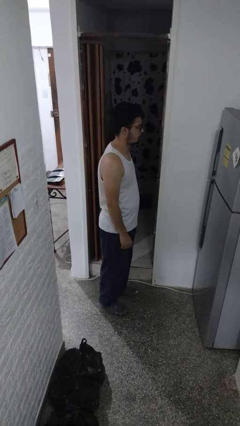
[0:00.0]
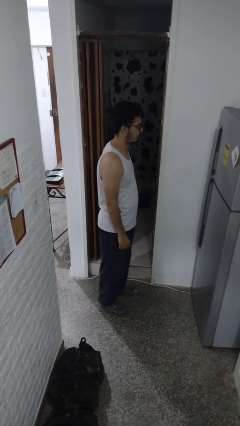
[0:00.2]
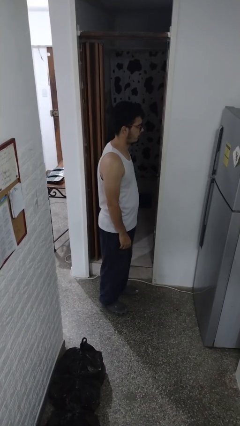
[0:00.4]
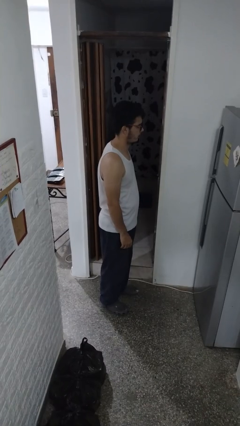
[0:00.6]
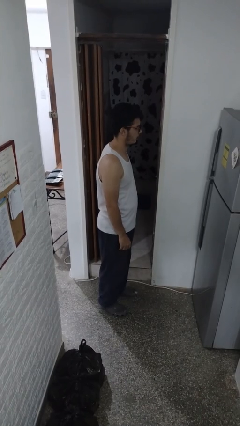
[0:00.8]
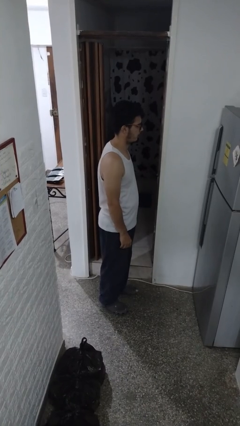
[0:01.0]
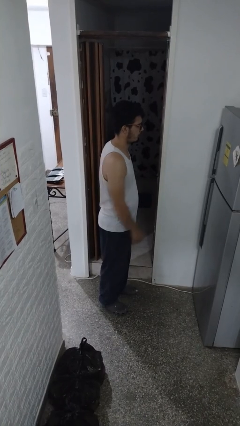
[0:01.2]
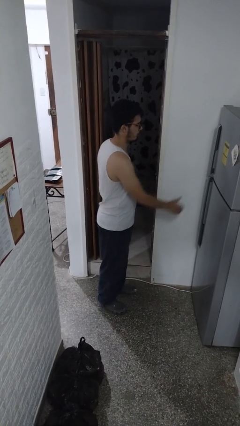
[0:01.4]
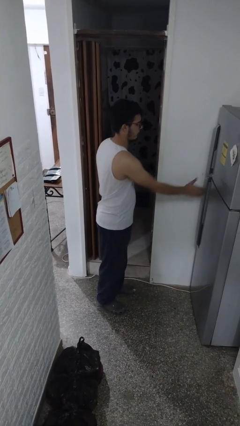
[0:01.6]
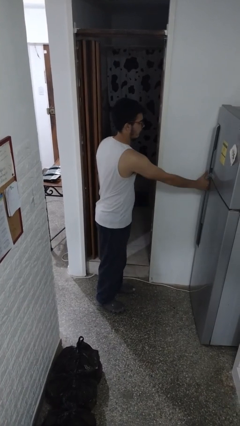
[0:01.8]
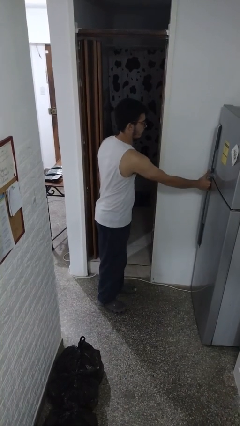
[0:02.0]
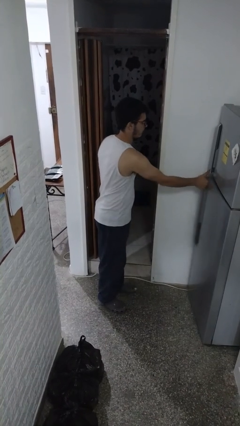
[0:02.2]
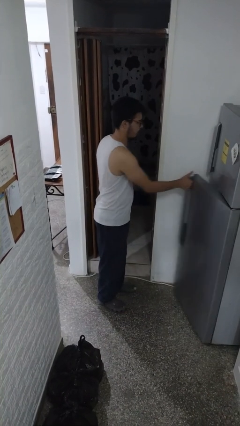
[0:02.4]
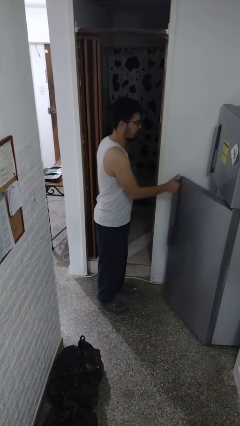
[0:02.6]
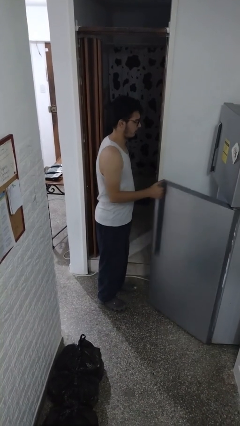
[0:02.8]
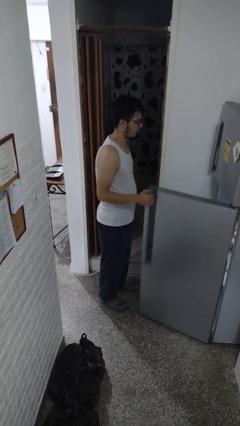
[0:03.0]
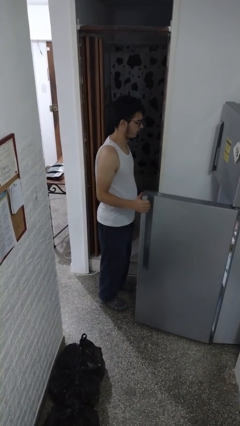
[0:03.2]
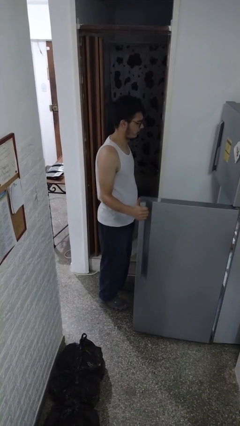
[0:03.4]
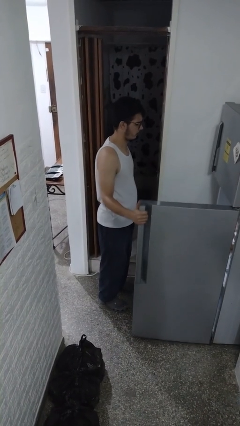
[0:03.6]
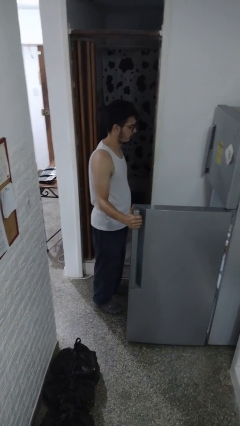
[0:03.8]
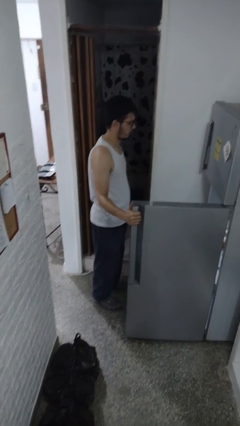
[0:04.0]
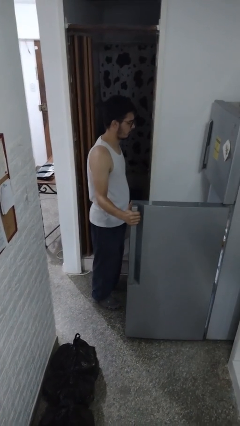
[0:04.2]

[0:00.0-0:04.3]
person opens refrigerator

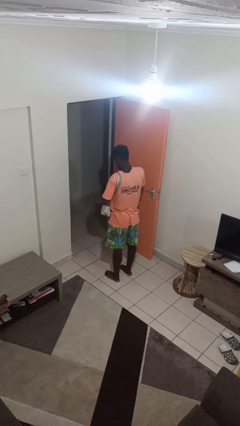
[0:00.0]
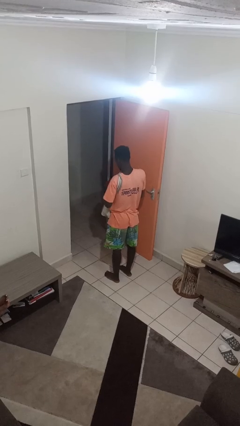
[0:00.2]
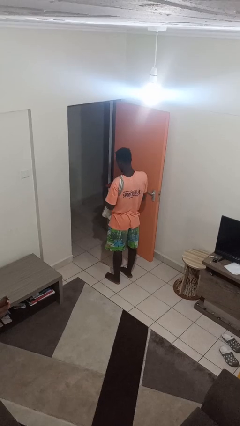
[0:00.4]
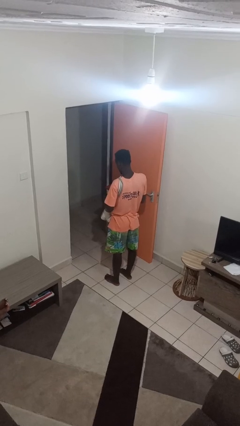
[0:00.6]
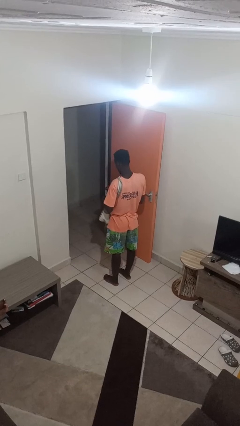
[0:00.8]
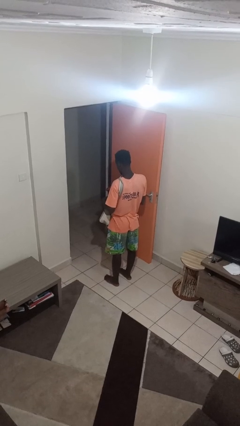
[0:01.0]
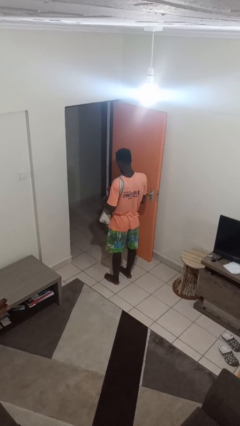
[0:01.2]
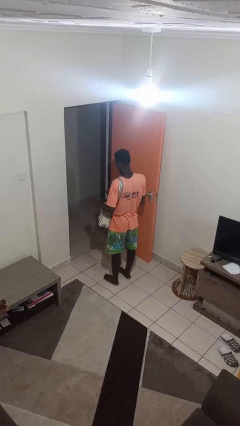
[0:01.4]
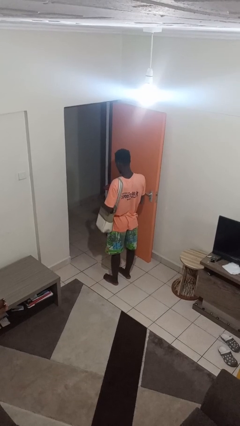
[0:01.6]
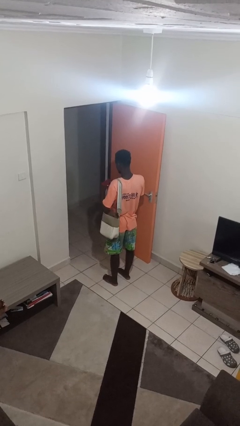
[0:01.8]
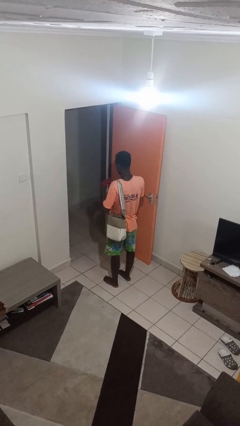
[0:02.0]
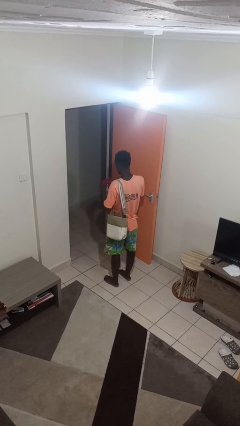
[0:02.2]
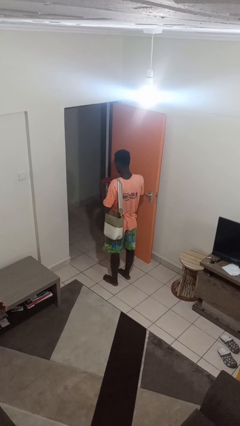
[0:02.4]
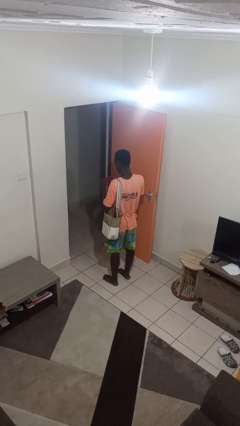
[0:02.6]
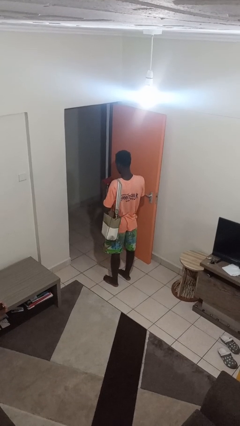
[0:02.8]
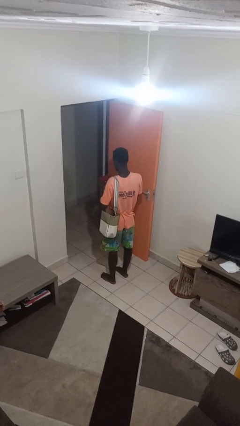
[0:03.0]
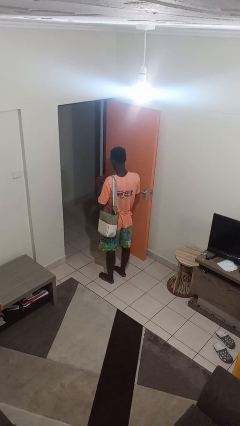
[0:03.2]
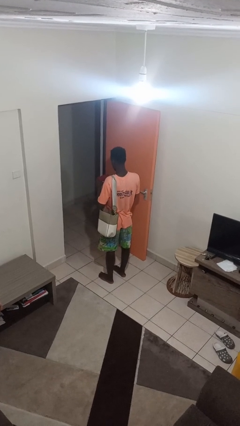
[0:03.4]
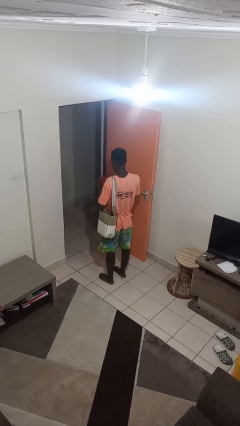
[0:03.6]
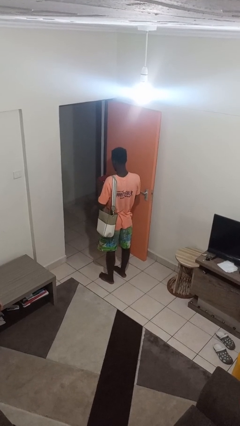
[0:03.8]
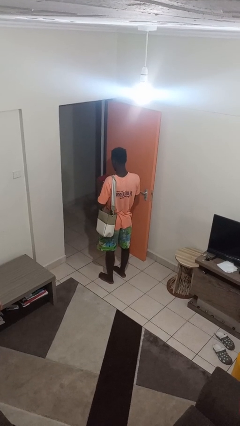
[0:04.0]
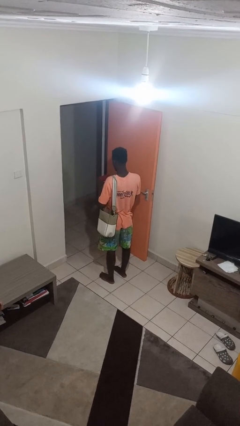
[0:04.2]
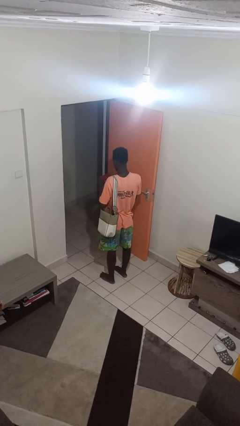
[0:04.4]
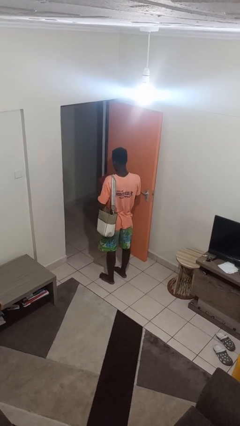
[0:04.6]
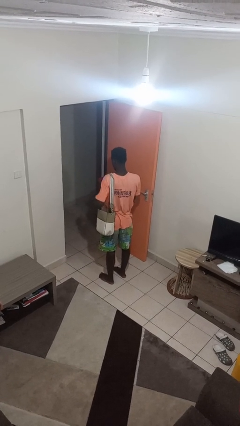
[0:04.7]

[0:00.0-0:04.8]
person takes object from purse

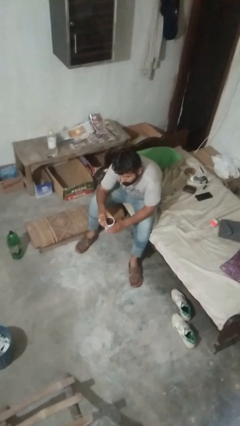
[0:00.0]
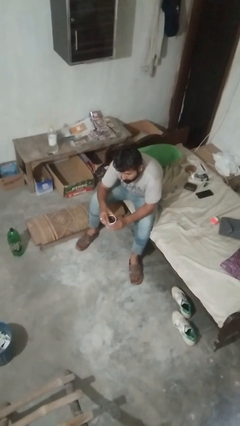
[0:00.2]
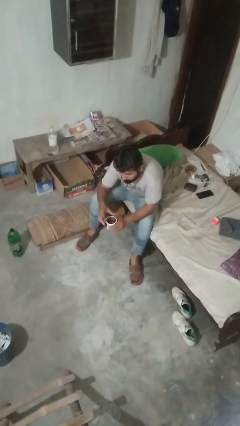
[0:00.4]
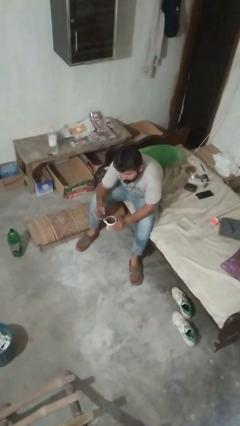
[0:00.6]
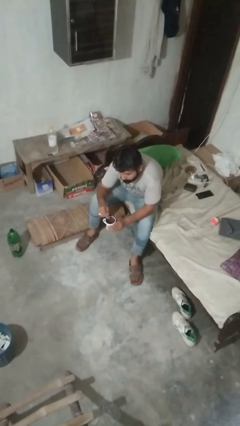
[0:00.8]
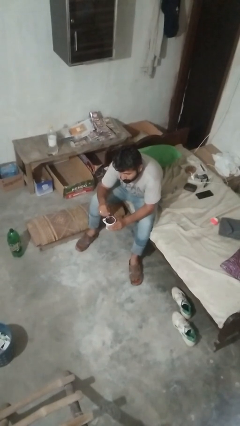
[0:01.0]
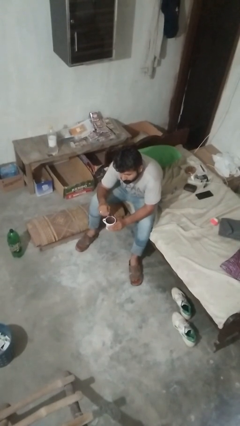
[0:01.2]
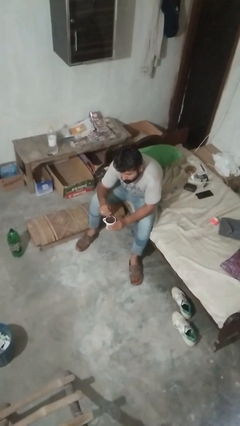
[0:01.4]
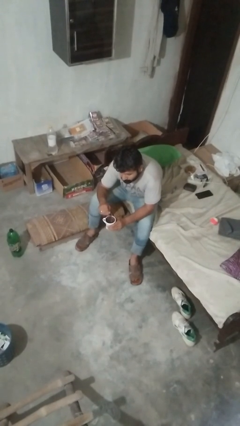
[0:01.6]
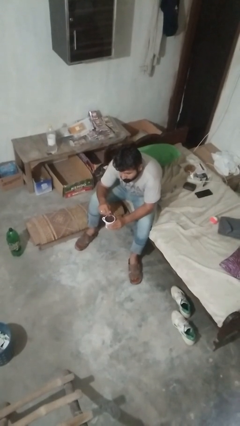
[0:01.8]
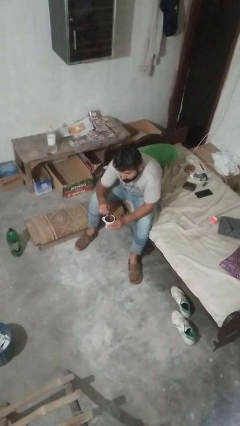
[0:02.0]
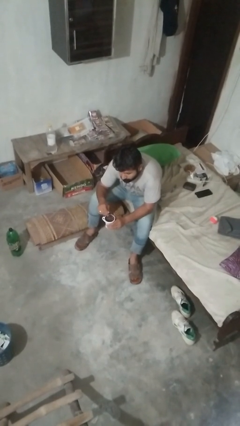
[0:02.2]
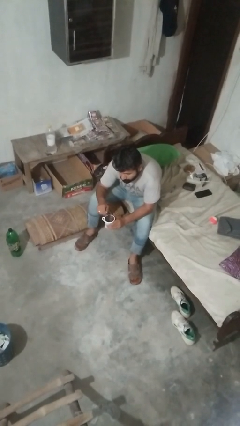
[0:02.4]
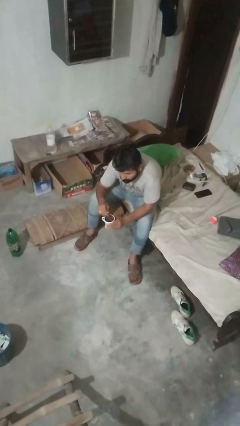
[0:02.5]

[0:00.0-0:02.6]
person stirs mug

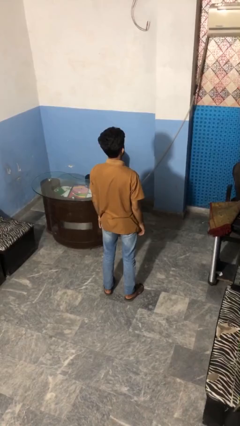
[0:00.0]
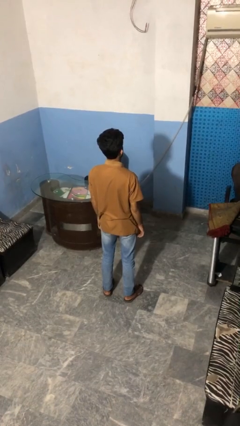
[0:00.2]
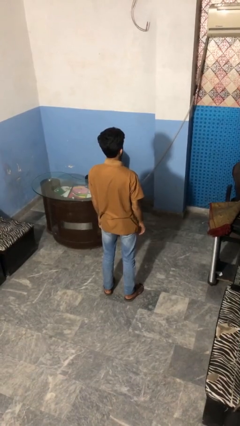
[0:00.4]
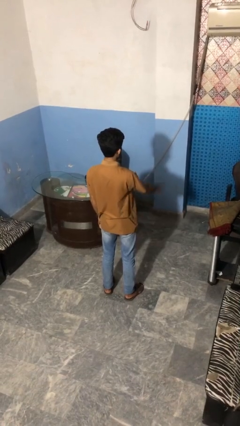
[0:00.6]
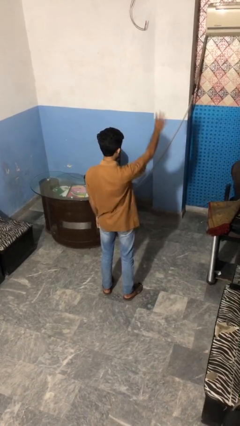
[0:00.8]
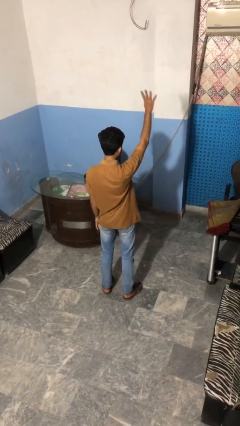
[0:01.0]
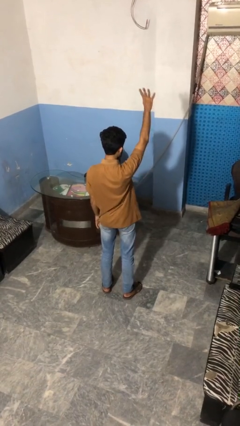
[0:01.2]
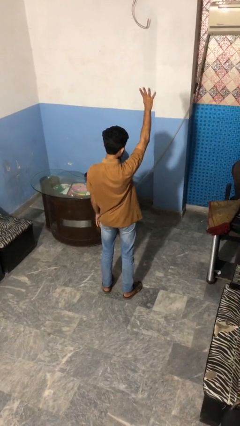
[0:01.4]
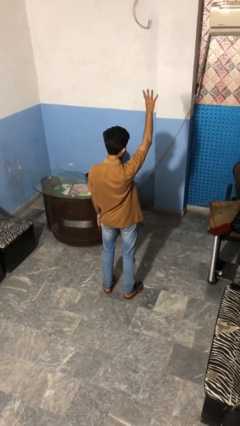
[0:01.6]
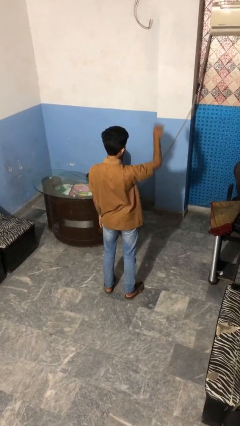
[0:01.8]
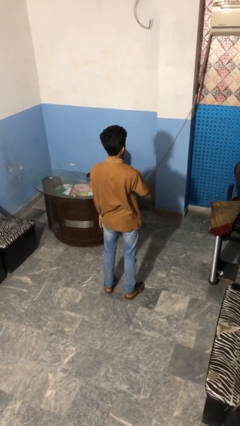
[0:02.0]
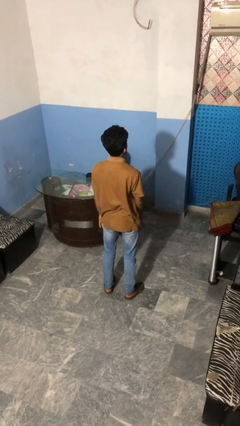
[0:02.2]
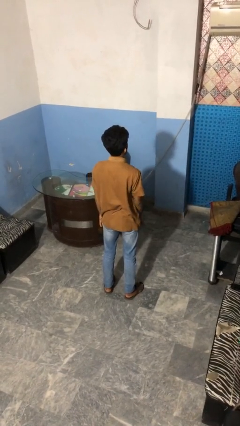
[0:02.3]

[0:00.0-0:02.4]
person gestures number four

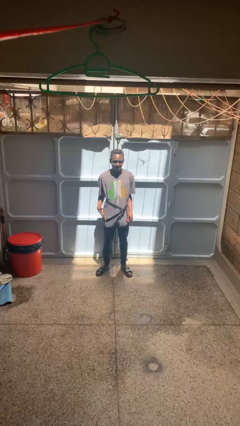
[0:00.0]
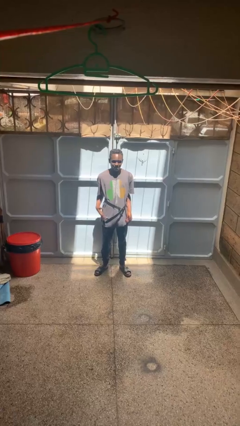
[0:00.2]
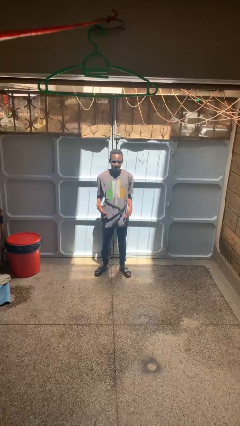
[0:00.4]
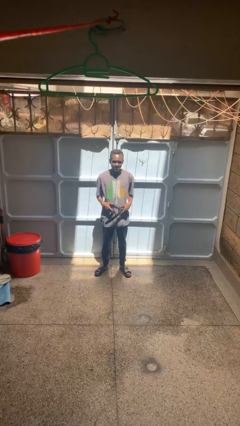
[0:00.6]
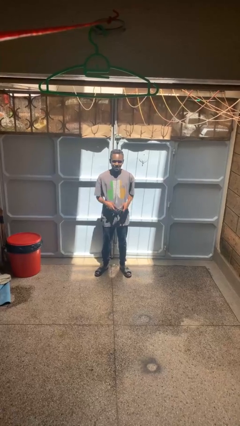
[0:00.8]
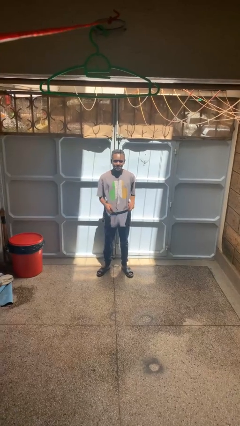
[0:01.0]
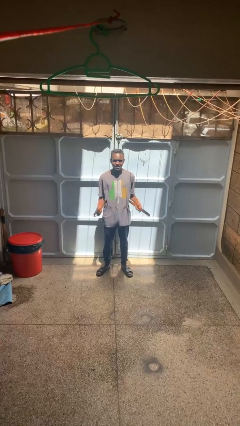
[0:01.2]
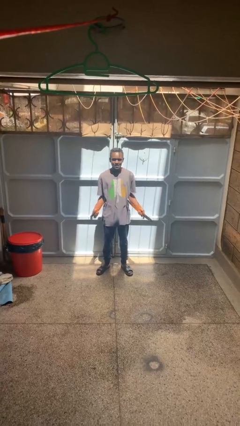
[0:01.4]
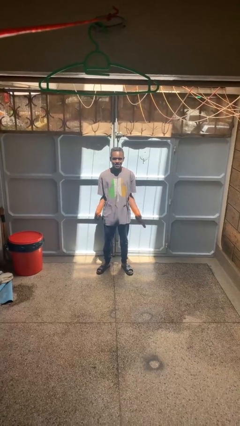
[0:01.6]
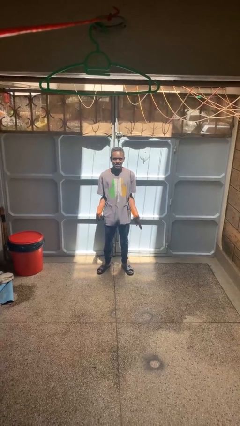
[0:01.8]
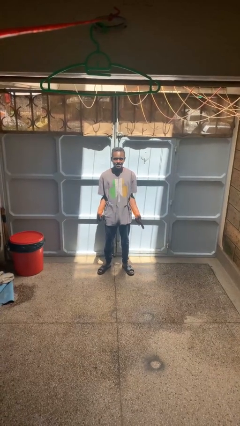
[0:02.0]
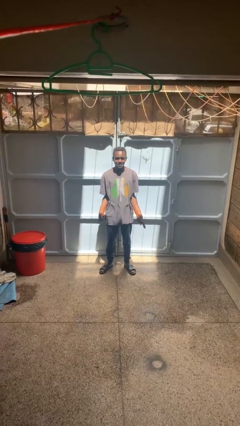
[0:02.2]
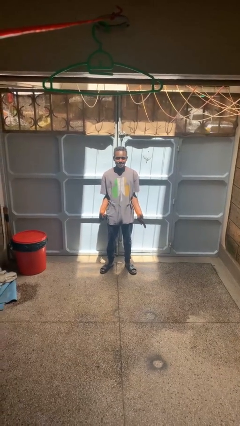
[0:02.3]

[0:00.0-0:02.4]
person takes off belt

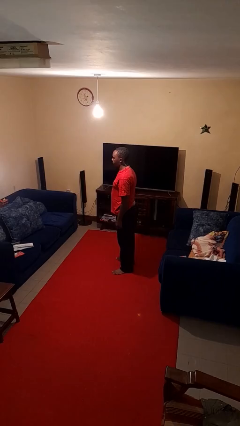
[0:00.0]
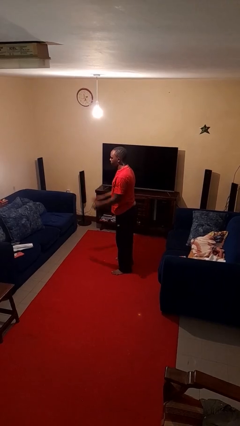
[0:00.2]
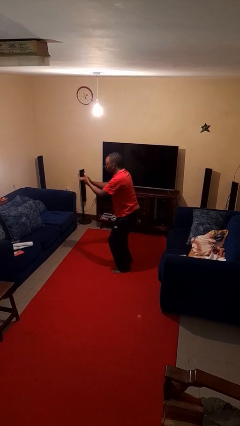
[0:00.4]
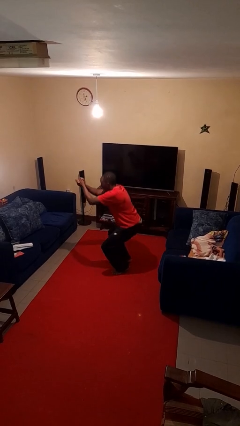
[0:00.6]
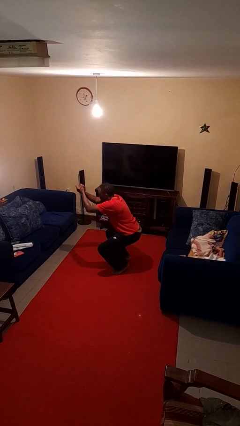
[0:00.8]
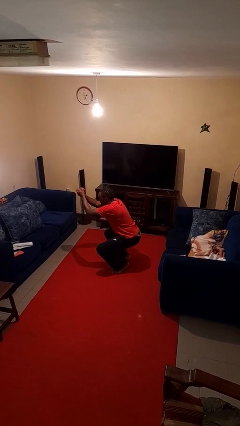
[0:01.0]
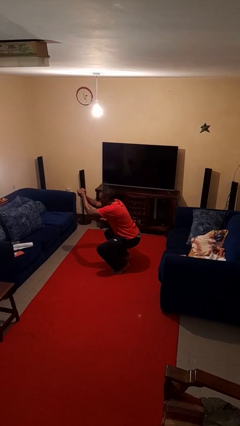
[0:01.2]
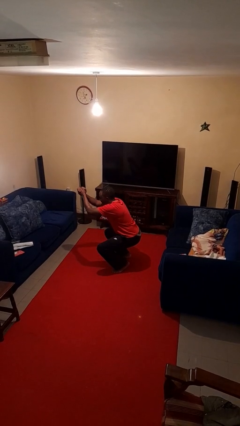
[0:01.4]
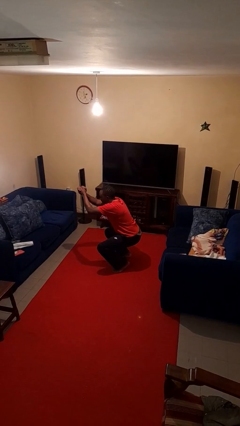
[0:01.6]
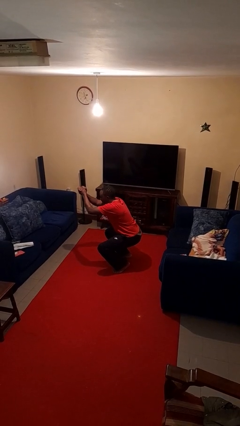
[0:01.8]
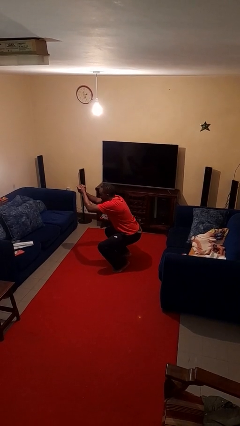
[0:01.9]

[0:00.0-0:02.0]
person squats
